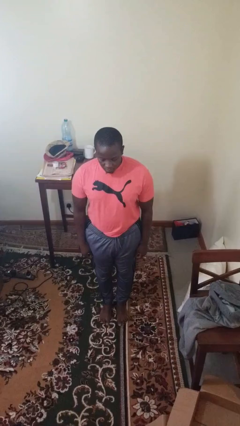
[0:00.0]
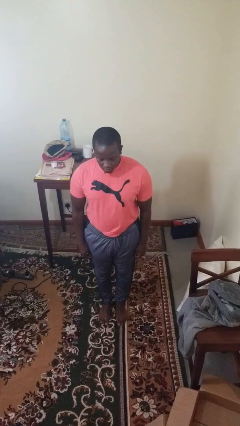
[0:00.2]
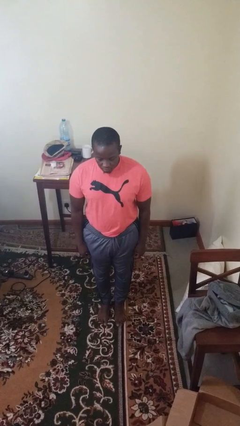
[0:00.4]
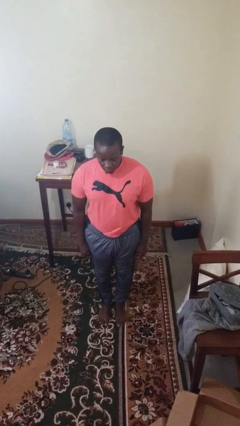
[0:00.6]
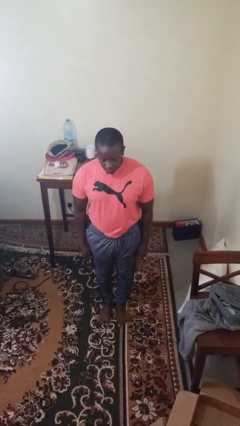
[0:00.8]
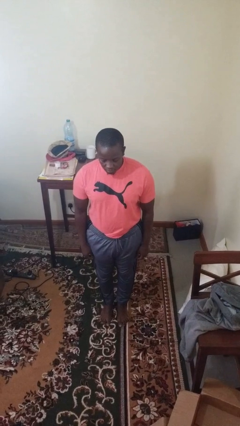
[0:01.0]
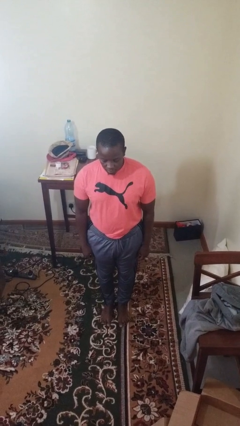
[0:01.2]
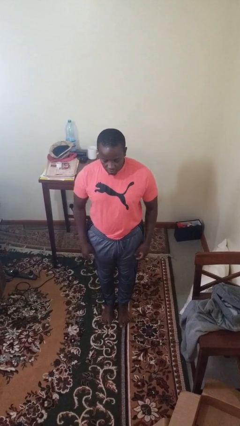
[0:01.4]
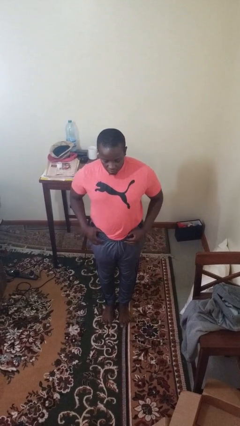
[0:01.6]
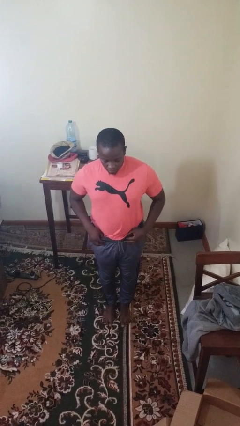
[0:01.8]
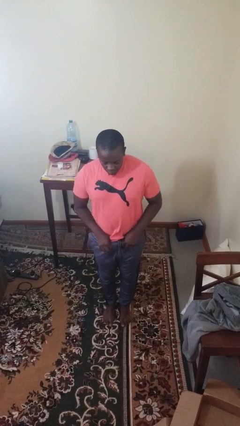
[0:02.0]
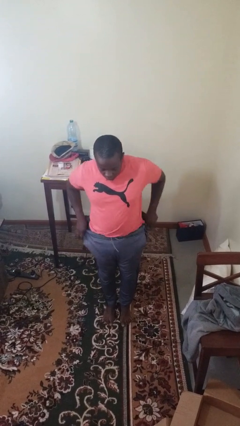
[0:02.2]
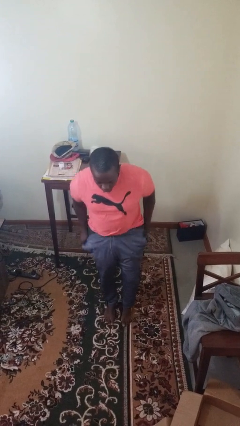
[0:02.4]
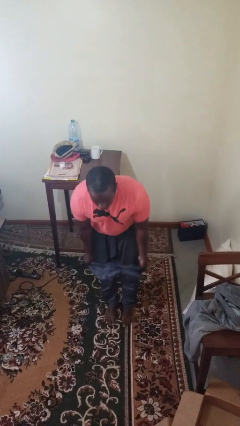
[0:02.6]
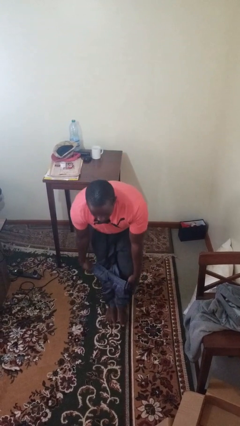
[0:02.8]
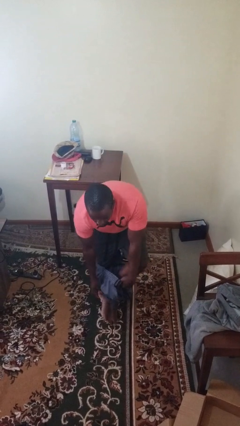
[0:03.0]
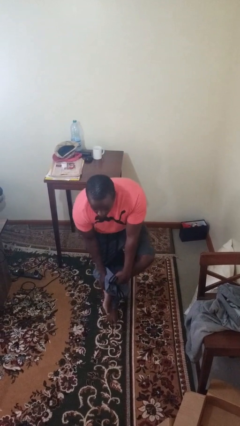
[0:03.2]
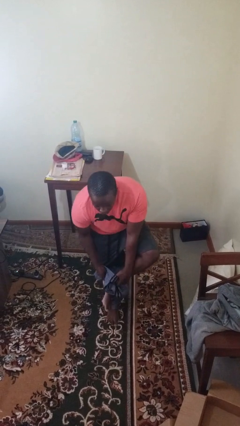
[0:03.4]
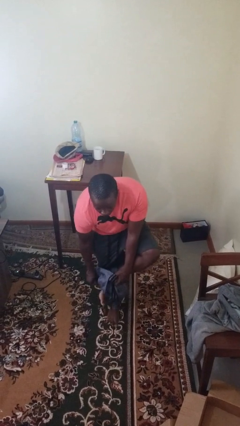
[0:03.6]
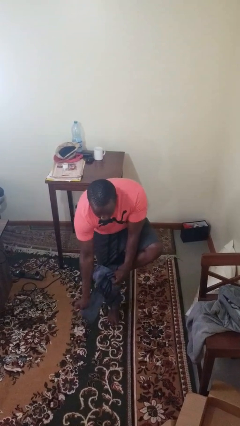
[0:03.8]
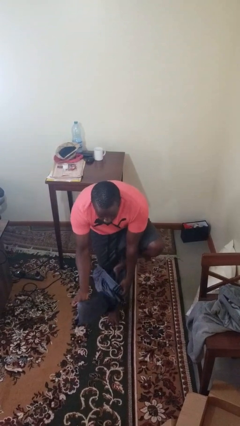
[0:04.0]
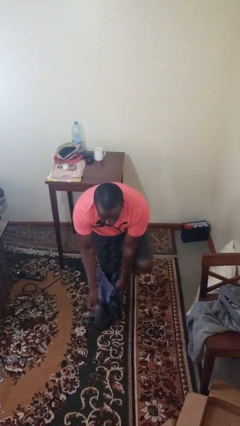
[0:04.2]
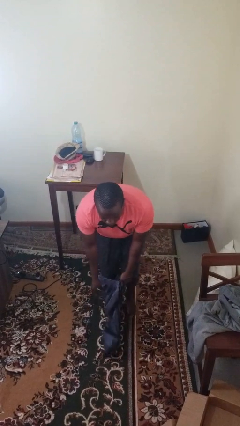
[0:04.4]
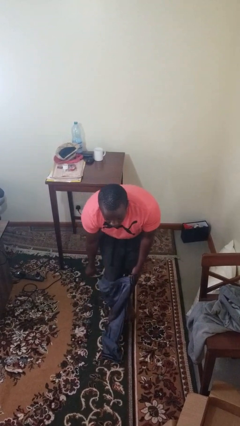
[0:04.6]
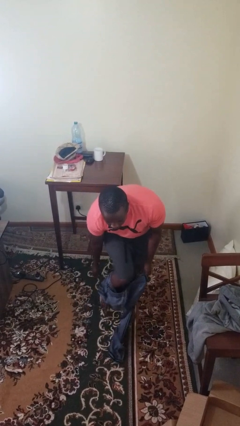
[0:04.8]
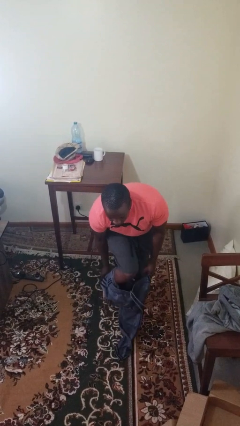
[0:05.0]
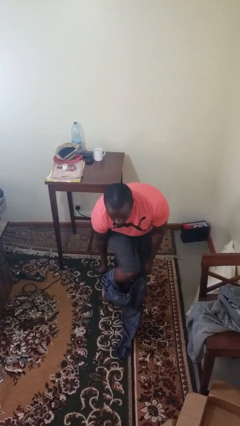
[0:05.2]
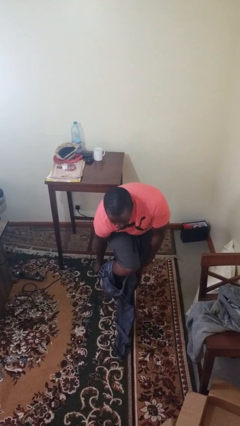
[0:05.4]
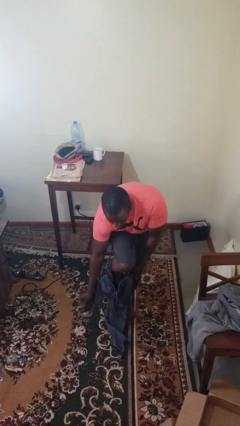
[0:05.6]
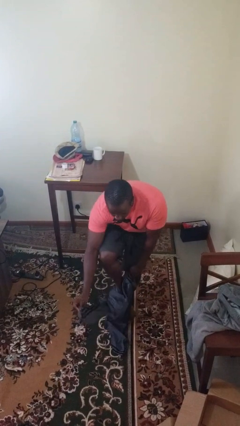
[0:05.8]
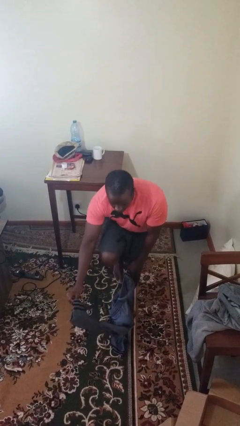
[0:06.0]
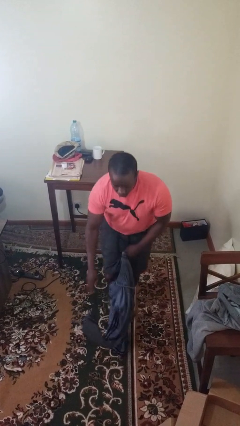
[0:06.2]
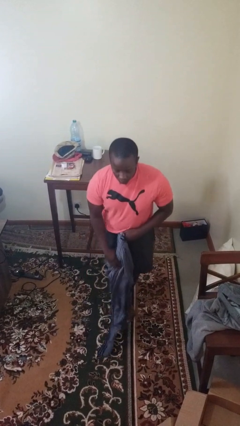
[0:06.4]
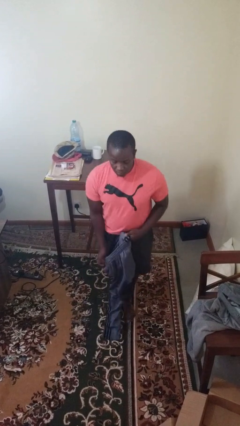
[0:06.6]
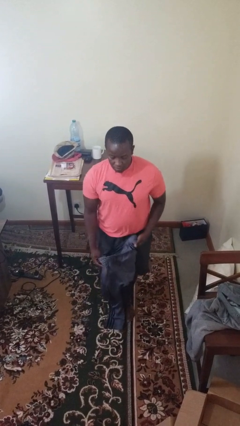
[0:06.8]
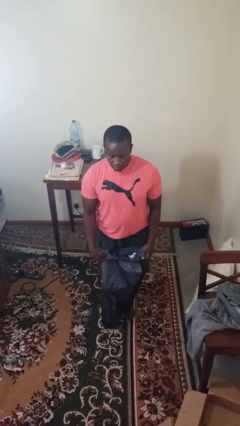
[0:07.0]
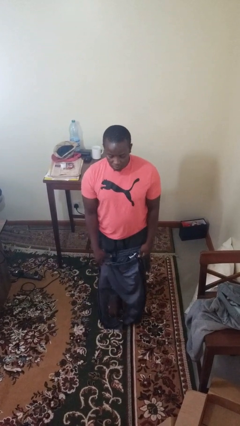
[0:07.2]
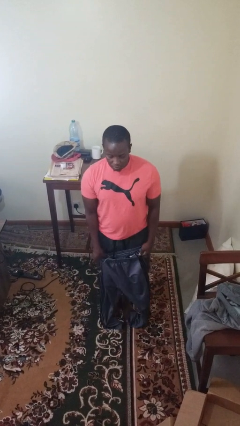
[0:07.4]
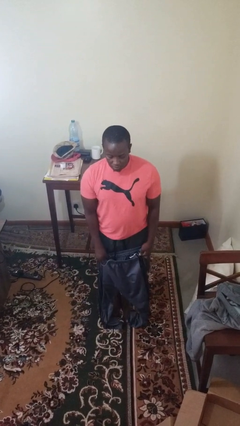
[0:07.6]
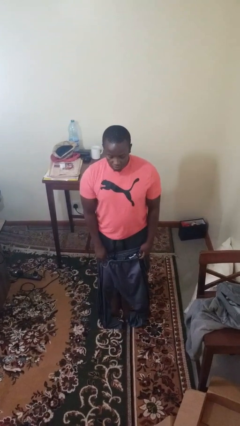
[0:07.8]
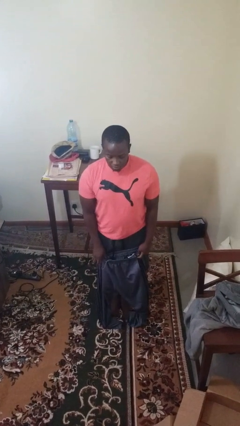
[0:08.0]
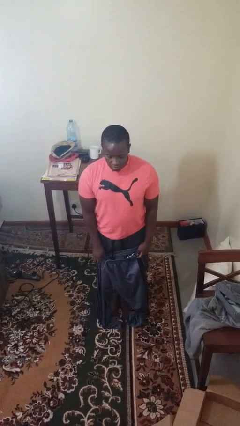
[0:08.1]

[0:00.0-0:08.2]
person takes off pants

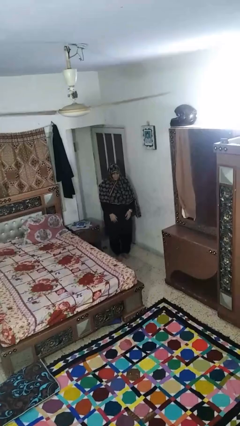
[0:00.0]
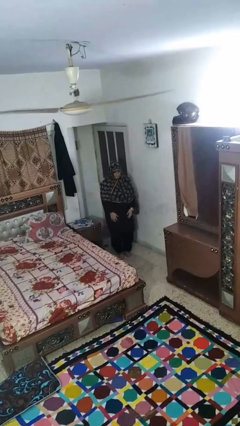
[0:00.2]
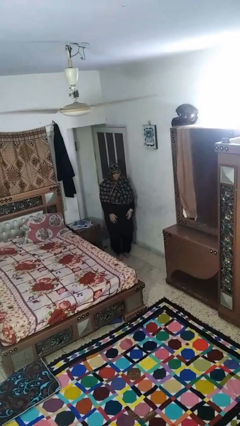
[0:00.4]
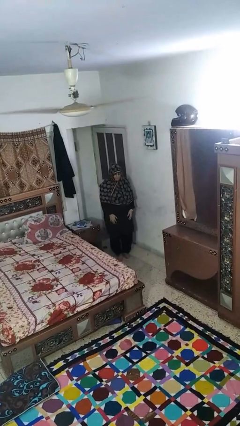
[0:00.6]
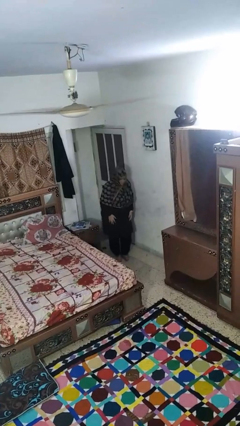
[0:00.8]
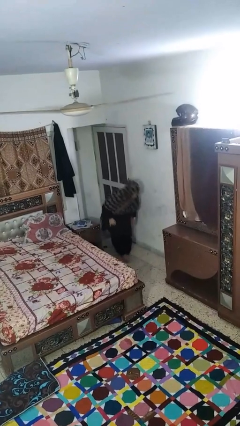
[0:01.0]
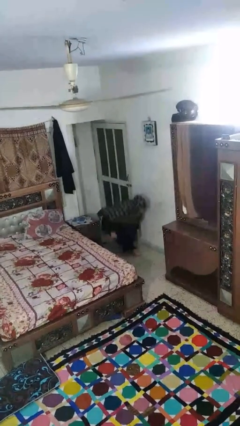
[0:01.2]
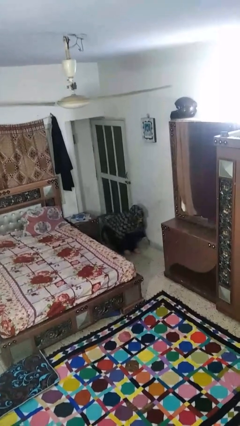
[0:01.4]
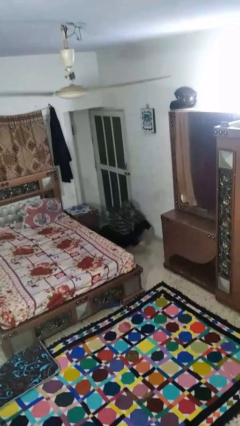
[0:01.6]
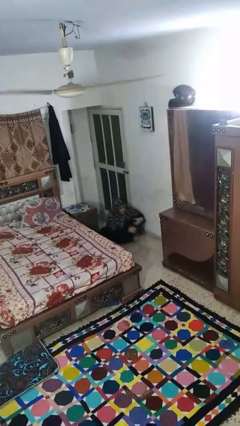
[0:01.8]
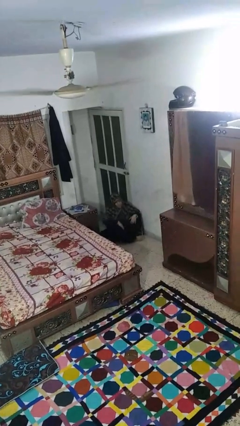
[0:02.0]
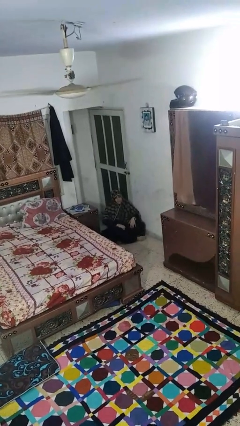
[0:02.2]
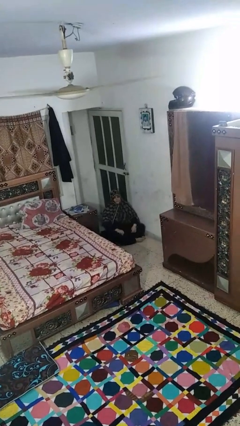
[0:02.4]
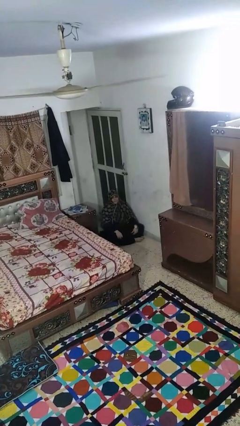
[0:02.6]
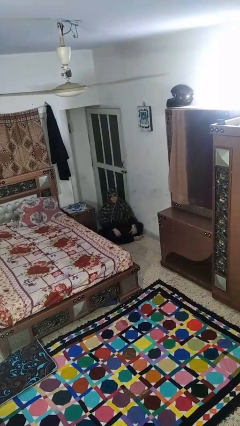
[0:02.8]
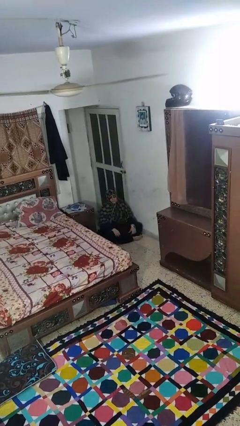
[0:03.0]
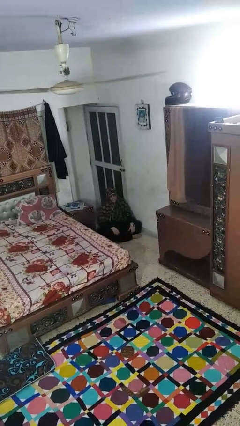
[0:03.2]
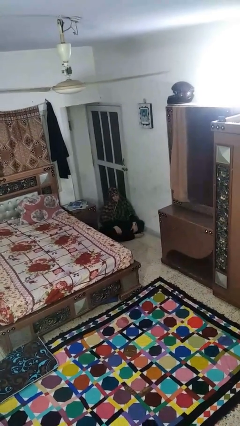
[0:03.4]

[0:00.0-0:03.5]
person sits crisscross

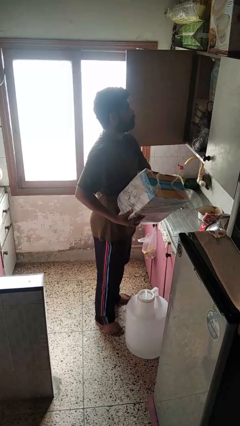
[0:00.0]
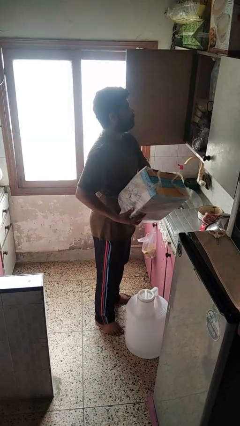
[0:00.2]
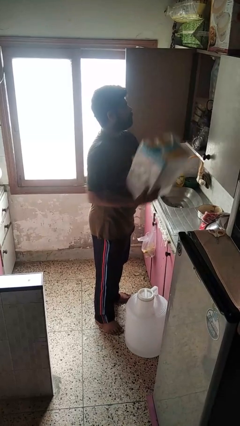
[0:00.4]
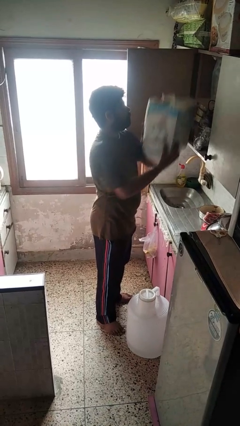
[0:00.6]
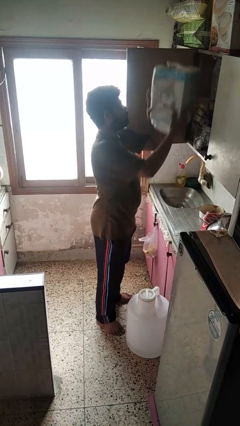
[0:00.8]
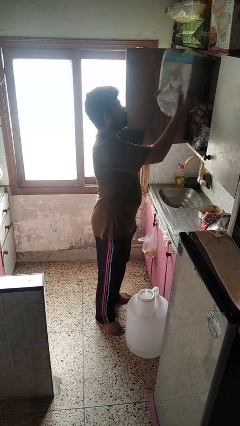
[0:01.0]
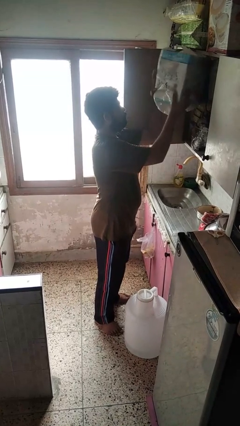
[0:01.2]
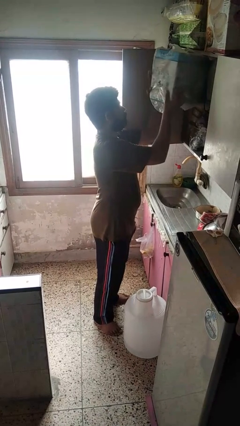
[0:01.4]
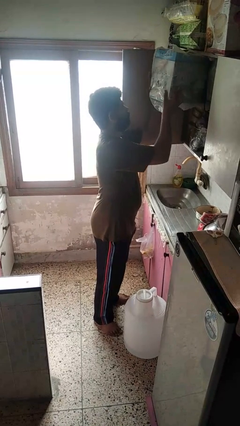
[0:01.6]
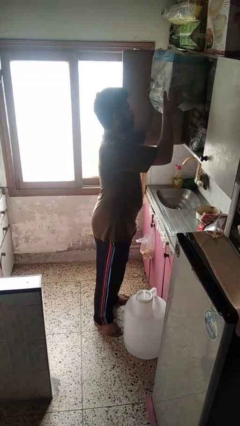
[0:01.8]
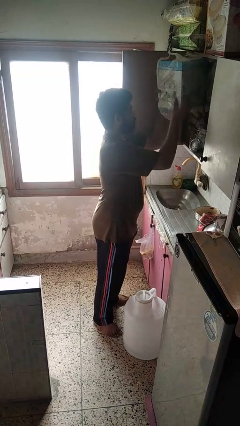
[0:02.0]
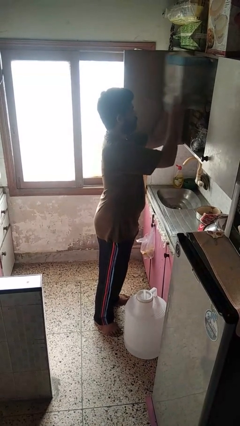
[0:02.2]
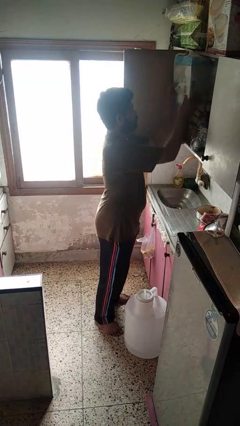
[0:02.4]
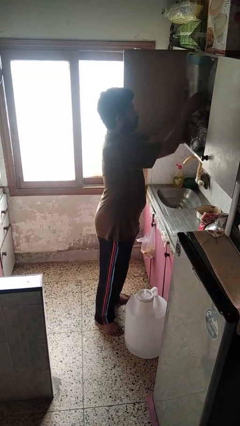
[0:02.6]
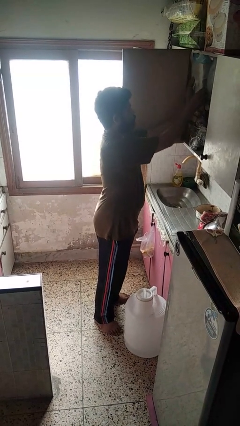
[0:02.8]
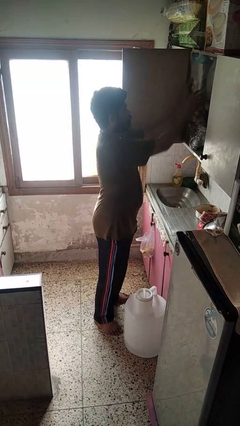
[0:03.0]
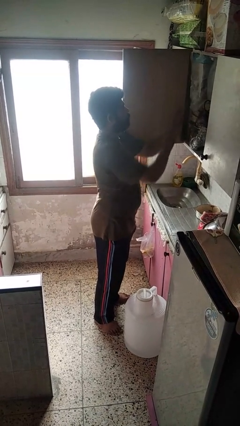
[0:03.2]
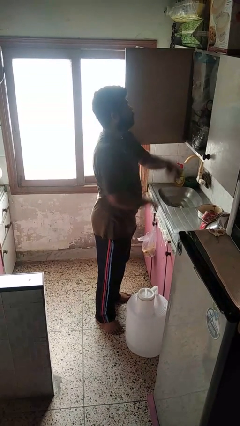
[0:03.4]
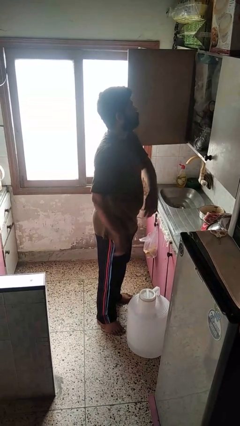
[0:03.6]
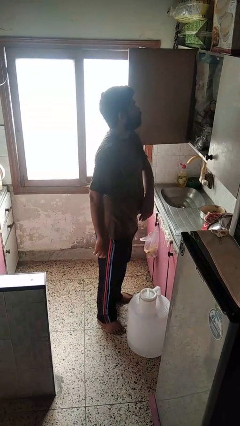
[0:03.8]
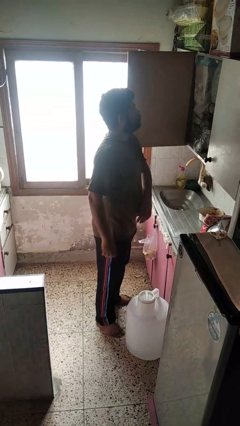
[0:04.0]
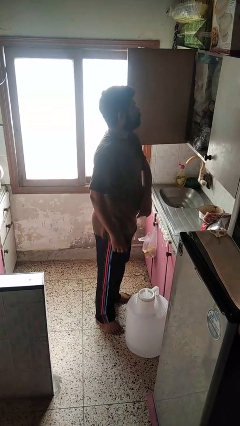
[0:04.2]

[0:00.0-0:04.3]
person puts down object into cabinet

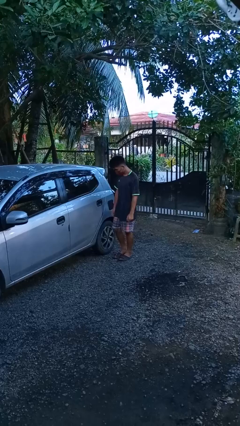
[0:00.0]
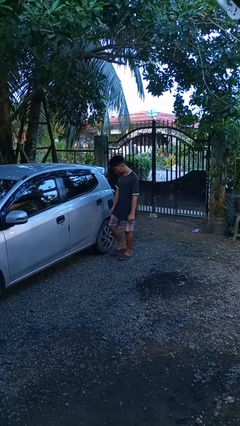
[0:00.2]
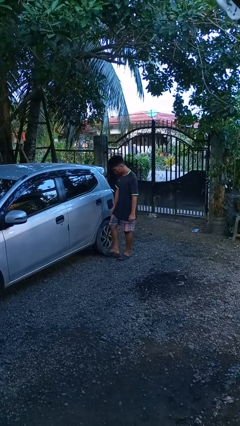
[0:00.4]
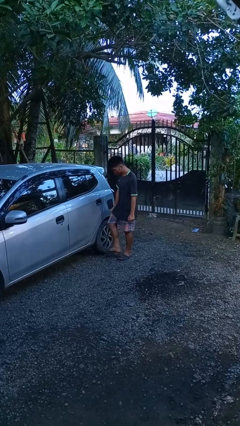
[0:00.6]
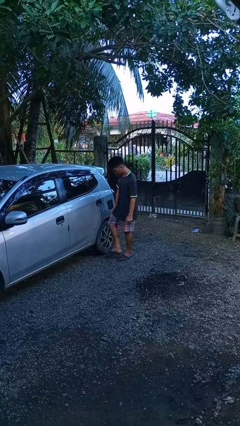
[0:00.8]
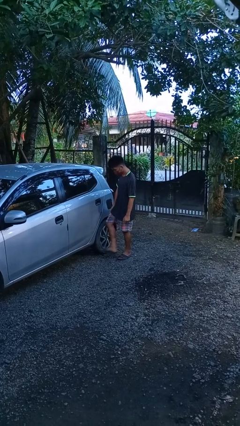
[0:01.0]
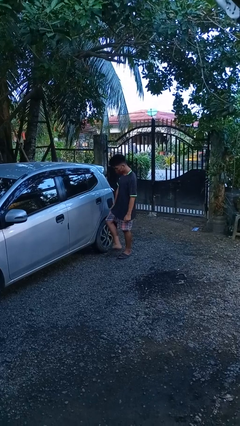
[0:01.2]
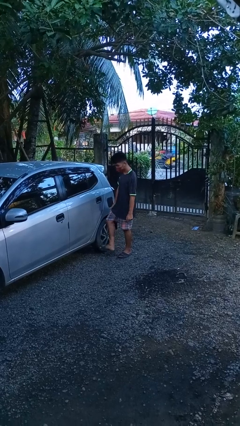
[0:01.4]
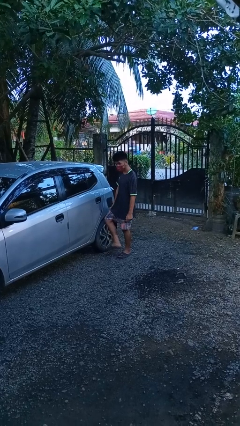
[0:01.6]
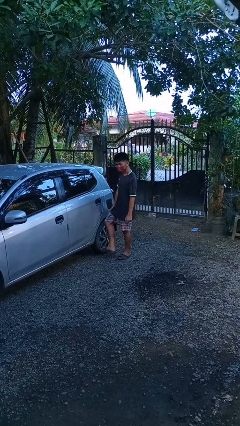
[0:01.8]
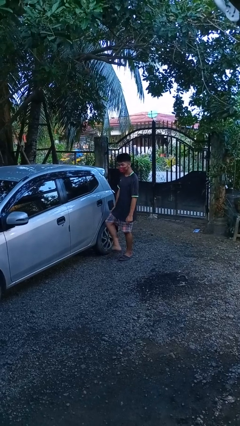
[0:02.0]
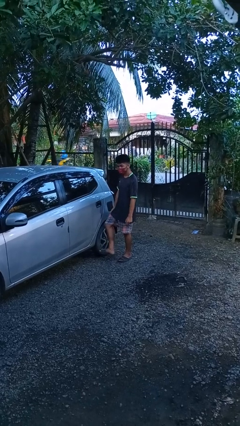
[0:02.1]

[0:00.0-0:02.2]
person kicks car tires
